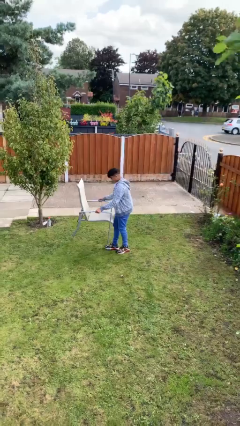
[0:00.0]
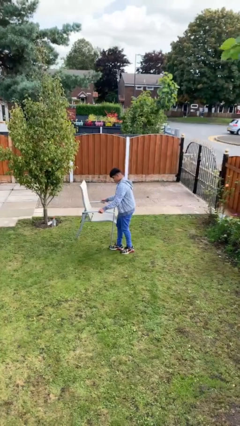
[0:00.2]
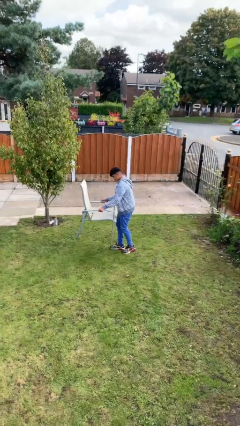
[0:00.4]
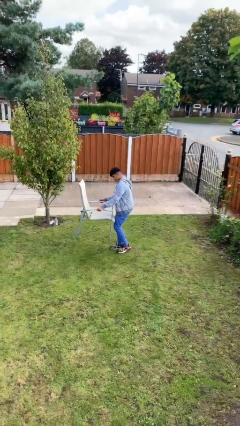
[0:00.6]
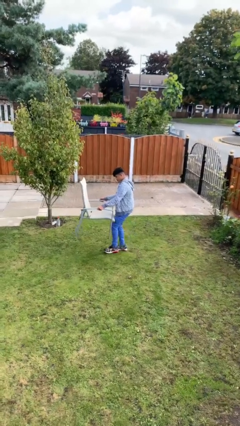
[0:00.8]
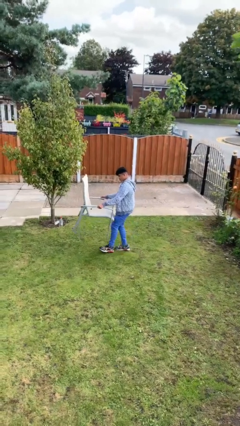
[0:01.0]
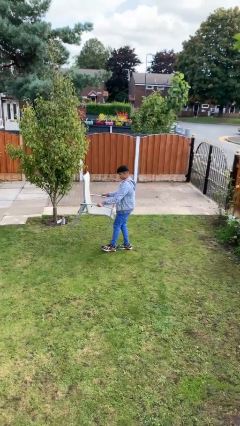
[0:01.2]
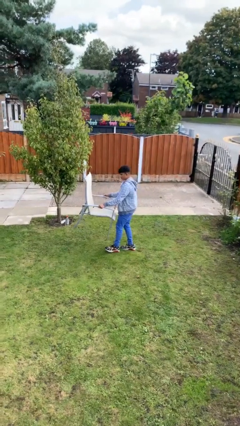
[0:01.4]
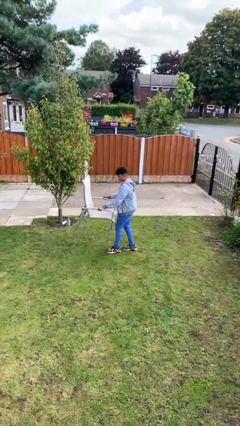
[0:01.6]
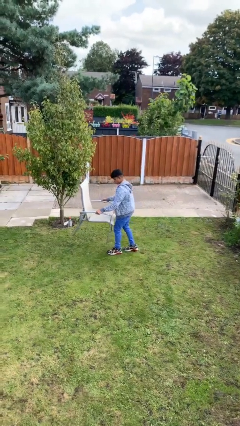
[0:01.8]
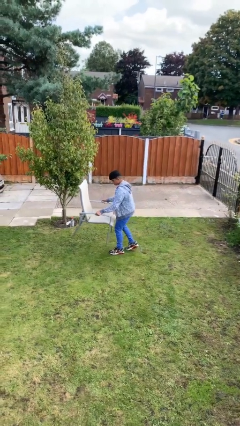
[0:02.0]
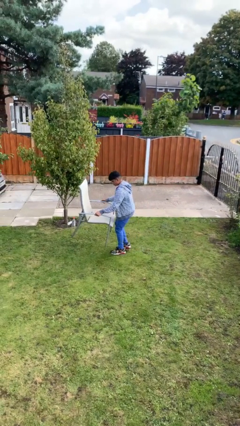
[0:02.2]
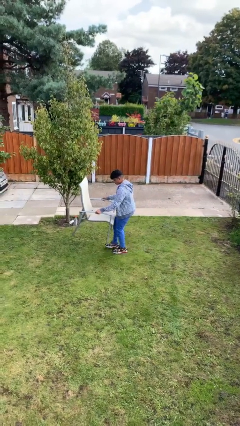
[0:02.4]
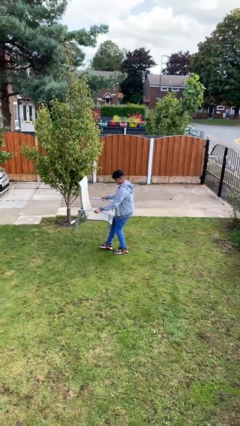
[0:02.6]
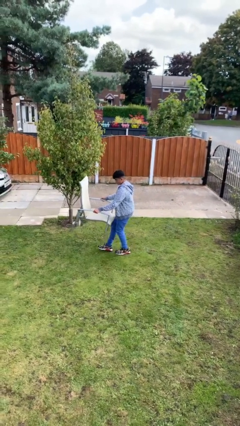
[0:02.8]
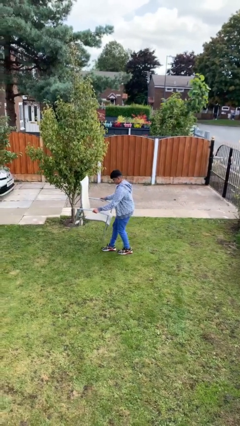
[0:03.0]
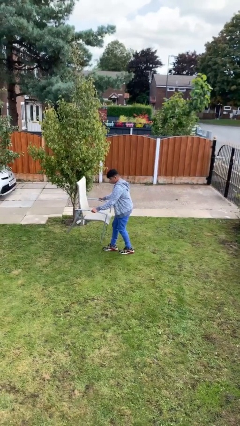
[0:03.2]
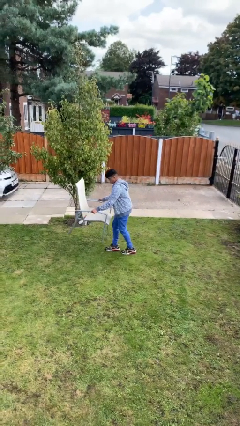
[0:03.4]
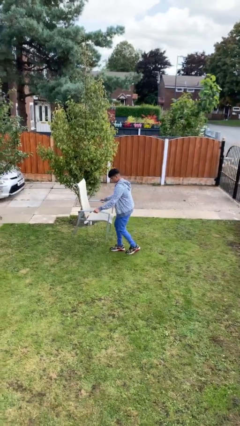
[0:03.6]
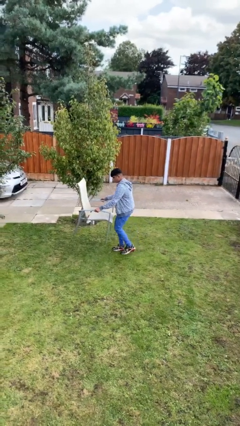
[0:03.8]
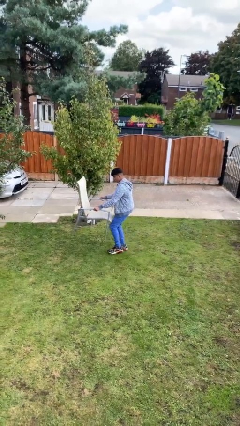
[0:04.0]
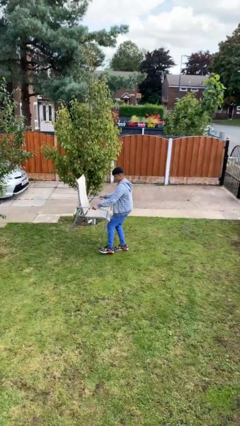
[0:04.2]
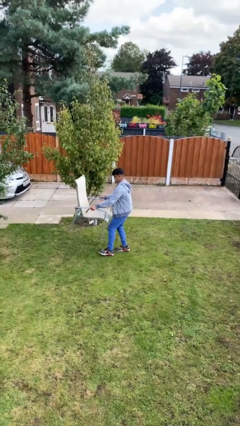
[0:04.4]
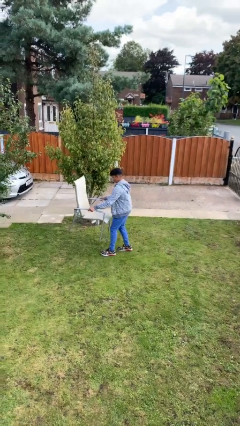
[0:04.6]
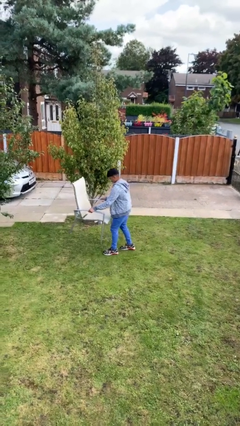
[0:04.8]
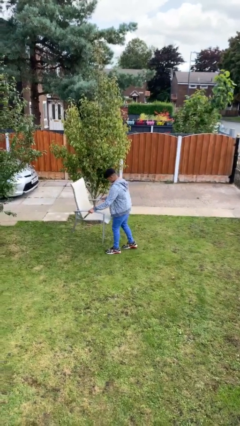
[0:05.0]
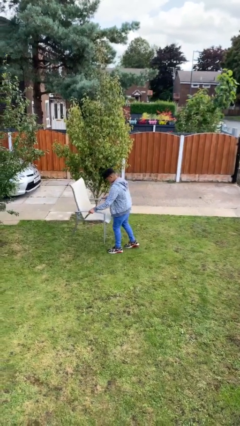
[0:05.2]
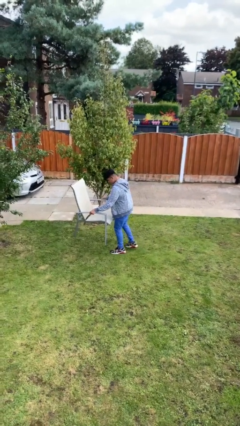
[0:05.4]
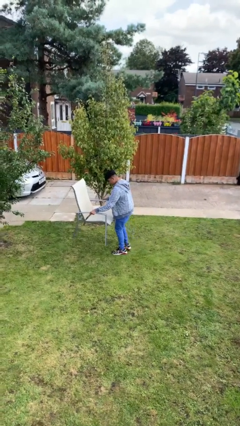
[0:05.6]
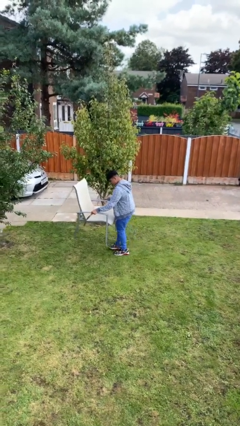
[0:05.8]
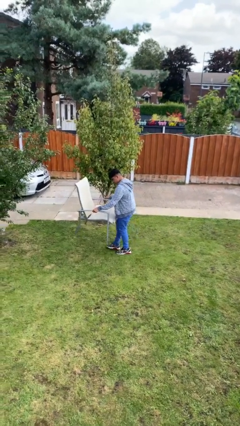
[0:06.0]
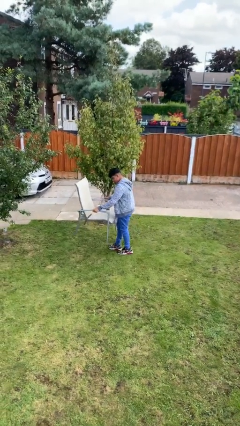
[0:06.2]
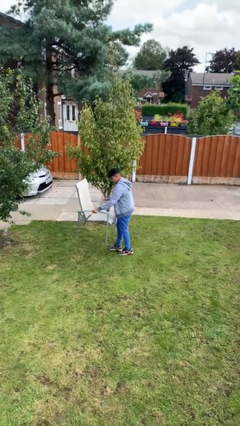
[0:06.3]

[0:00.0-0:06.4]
person carries heavy object

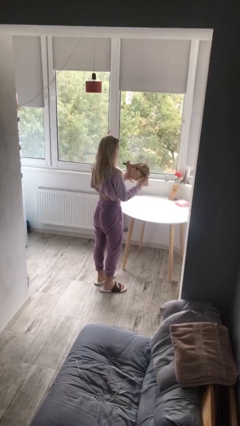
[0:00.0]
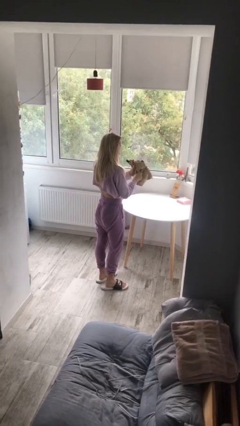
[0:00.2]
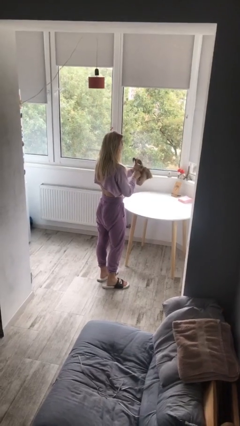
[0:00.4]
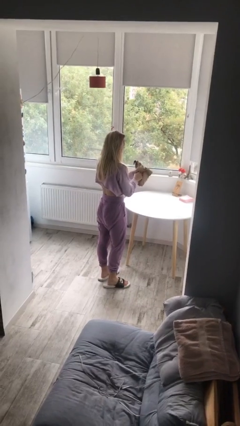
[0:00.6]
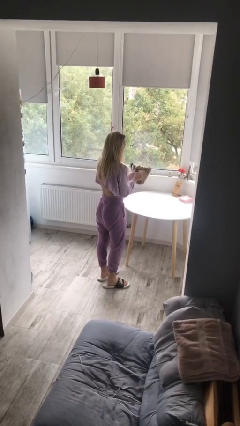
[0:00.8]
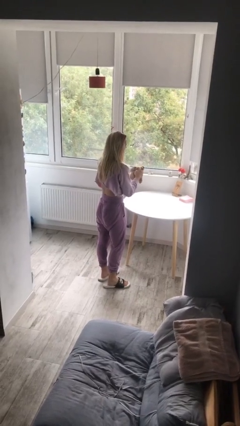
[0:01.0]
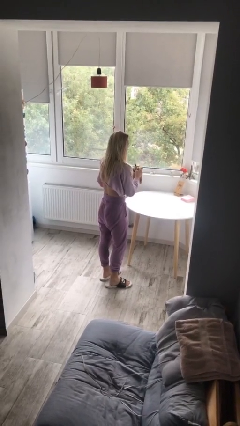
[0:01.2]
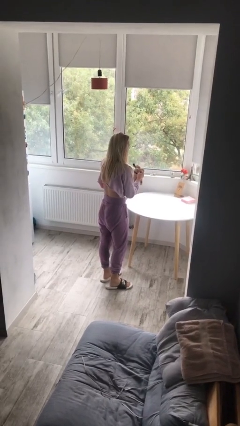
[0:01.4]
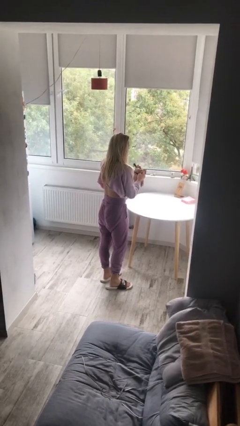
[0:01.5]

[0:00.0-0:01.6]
person crumples paper

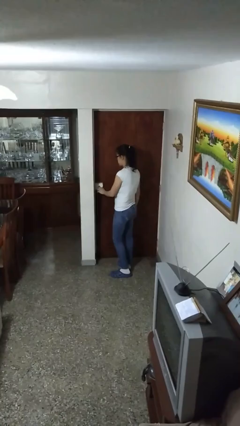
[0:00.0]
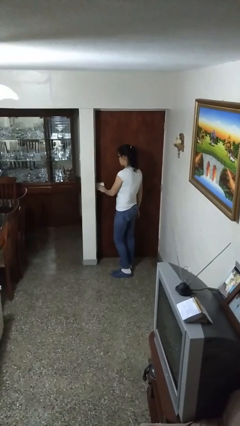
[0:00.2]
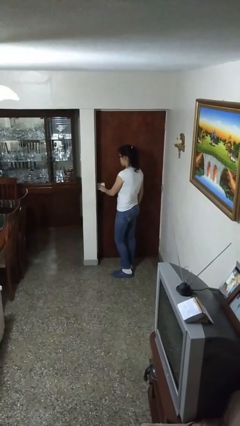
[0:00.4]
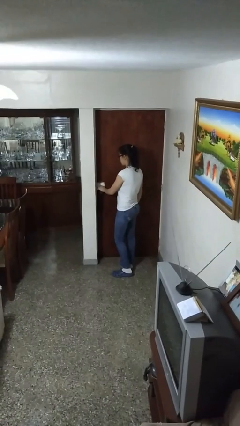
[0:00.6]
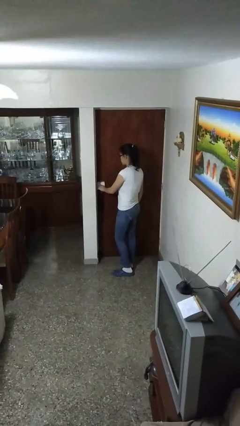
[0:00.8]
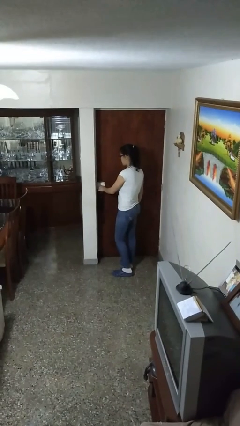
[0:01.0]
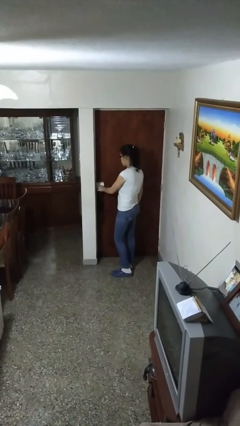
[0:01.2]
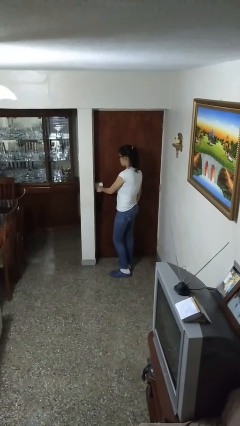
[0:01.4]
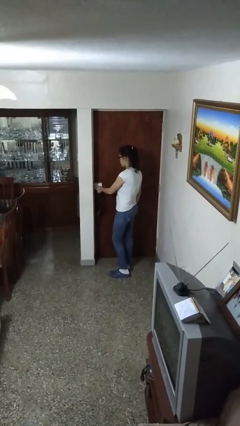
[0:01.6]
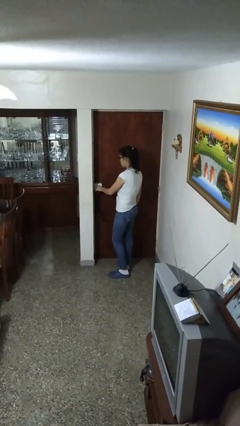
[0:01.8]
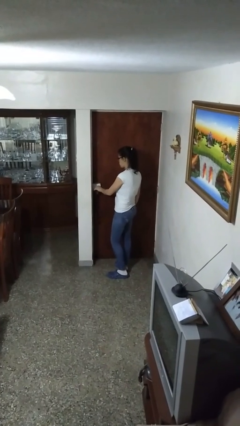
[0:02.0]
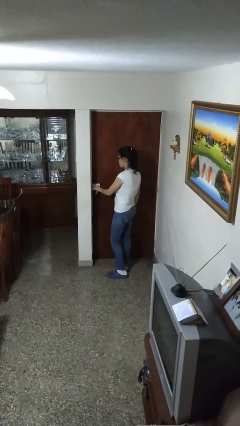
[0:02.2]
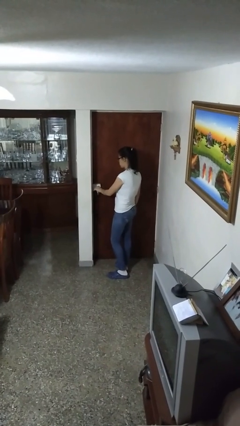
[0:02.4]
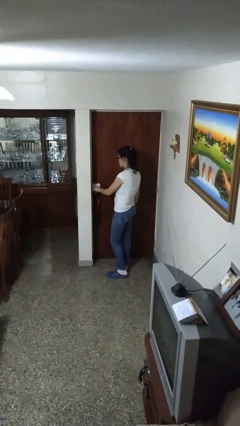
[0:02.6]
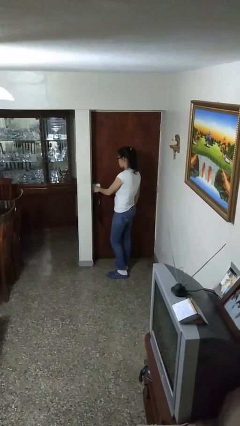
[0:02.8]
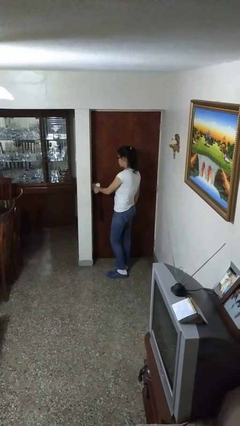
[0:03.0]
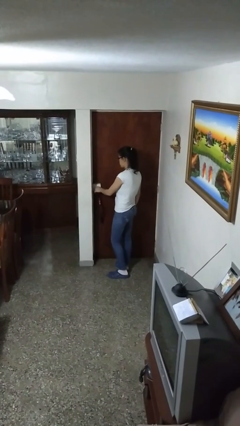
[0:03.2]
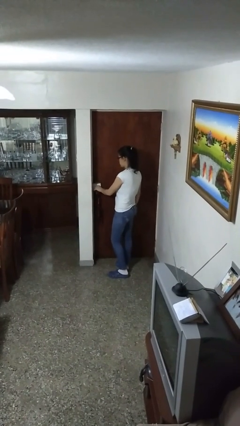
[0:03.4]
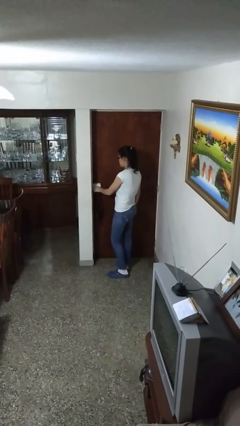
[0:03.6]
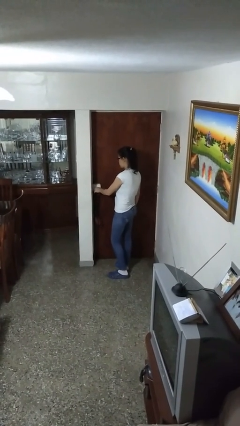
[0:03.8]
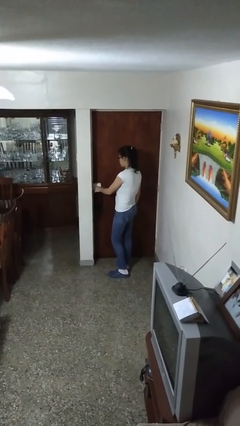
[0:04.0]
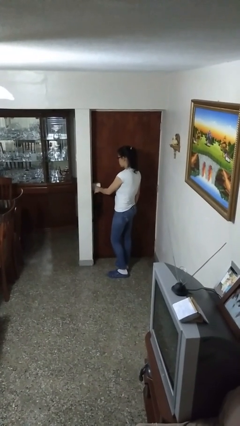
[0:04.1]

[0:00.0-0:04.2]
person locks door with keys

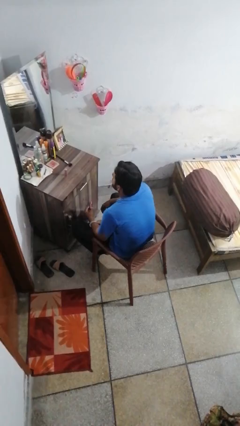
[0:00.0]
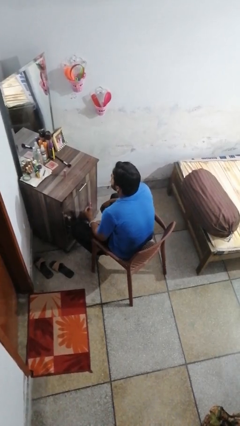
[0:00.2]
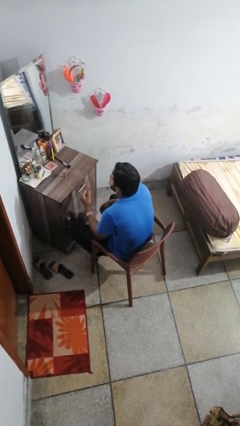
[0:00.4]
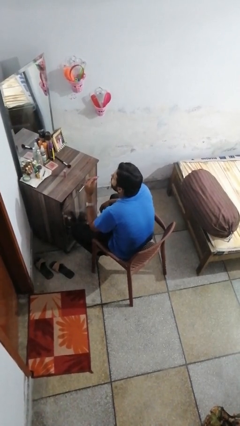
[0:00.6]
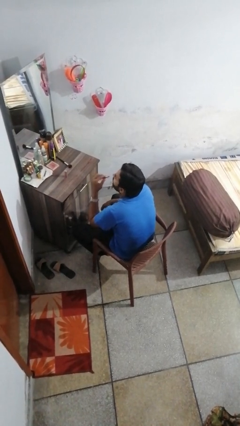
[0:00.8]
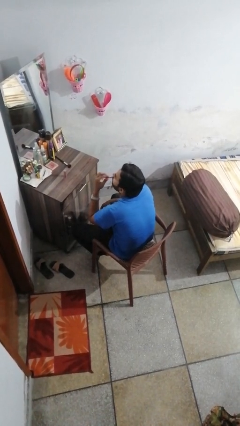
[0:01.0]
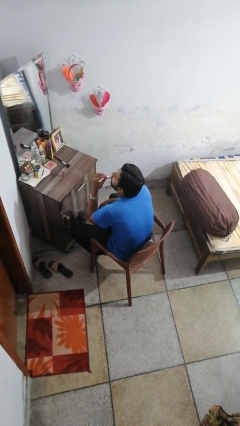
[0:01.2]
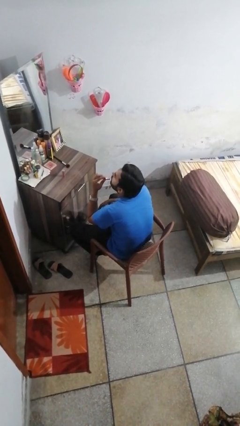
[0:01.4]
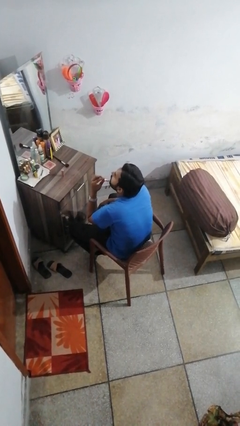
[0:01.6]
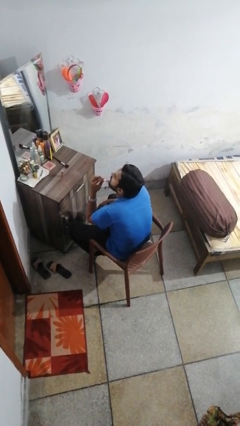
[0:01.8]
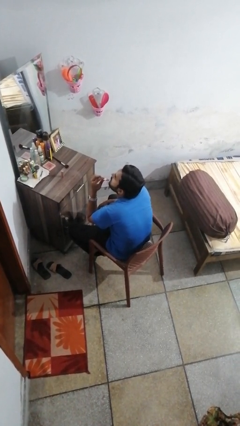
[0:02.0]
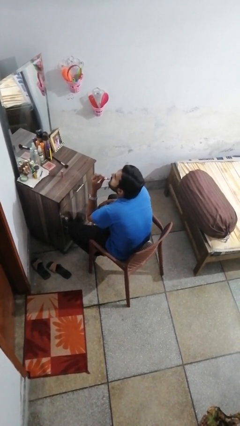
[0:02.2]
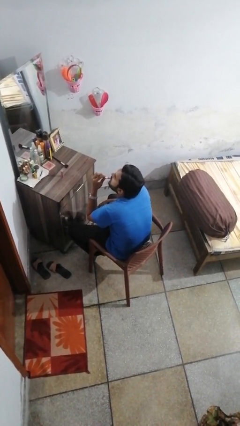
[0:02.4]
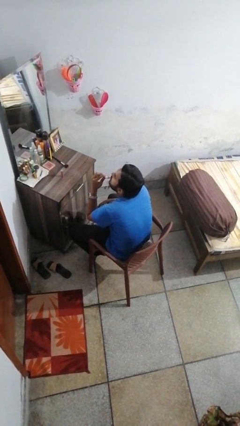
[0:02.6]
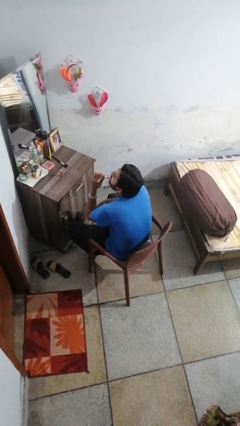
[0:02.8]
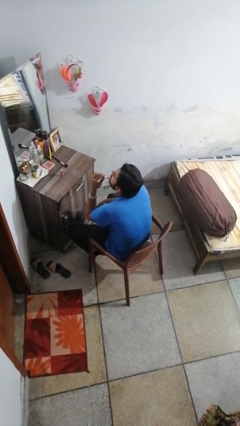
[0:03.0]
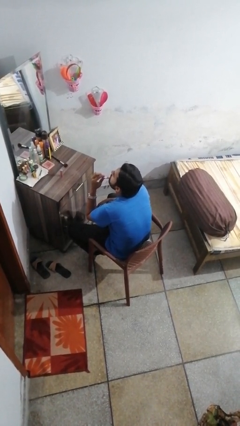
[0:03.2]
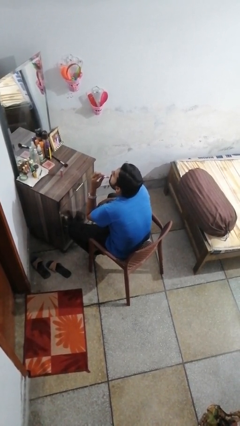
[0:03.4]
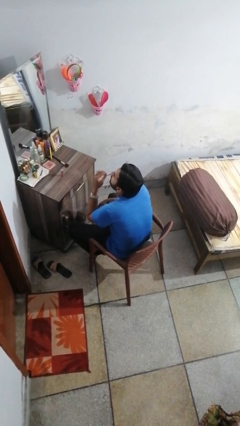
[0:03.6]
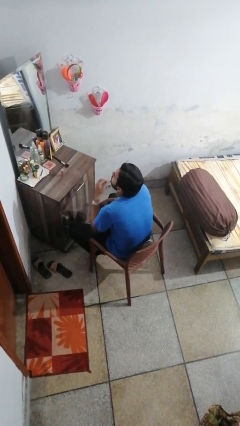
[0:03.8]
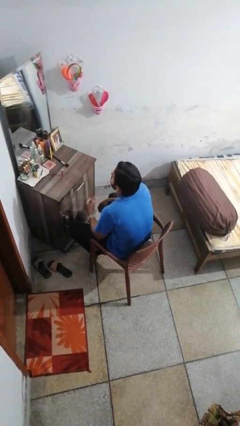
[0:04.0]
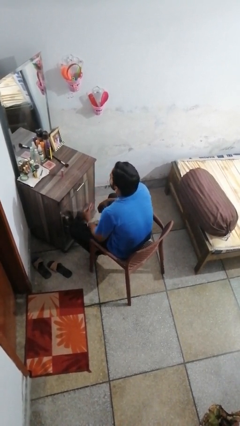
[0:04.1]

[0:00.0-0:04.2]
person applies lip makeup

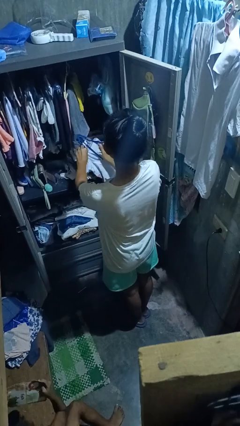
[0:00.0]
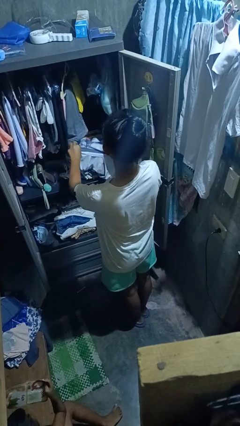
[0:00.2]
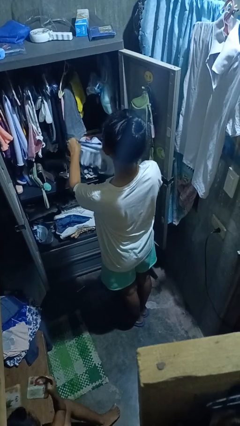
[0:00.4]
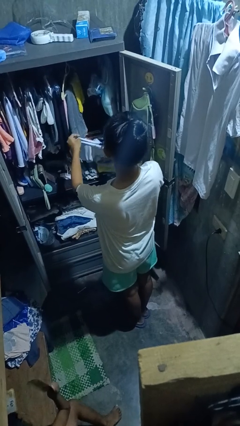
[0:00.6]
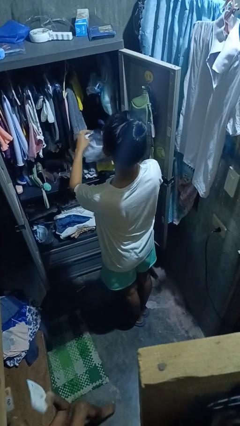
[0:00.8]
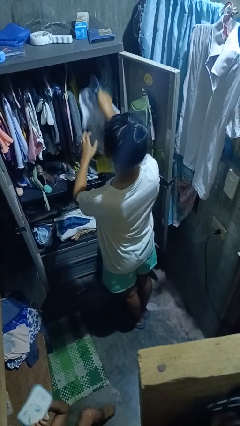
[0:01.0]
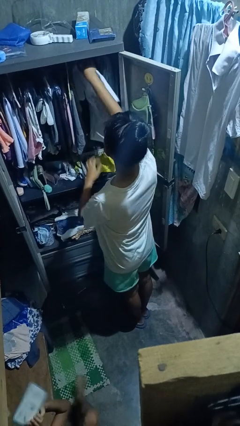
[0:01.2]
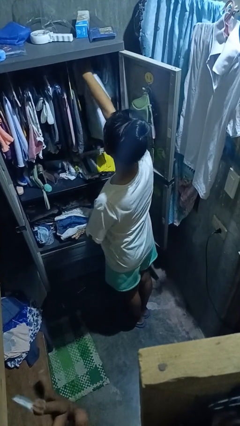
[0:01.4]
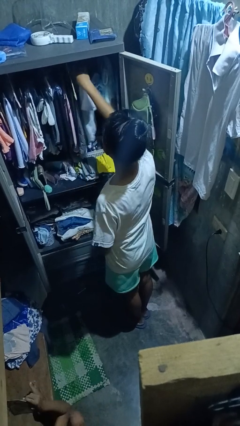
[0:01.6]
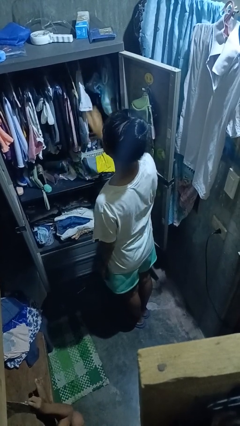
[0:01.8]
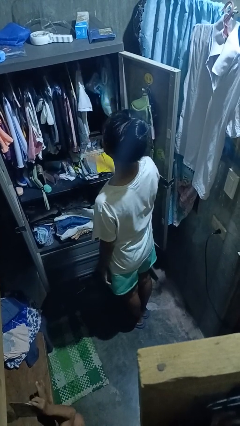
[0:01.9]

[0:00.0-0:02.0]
person puts clothes into closet
